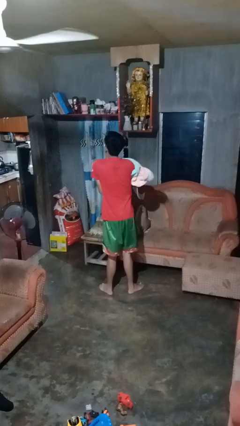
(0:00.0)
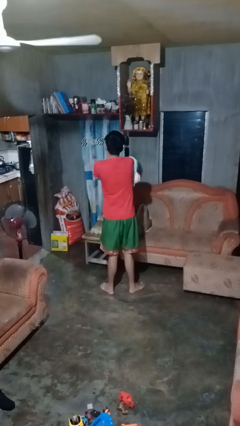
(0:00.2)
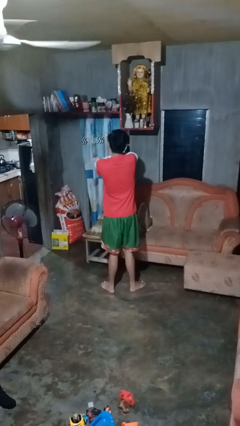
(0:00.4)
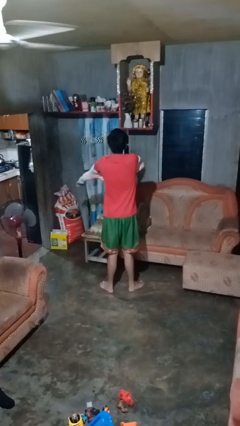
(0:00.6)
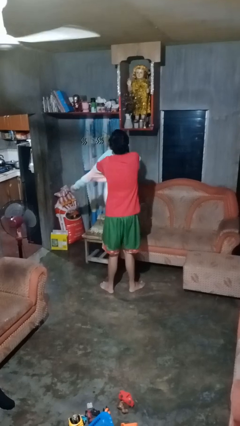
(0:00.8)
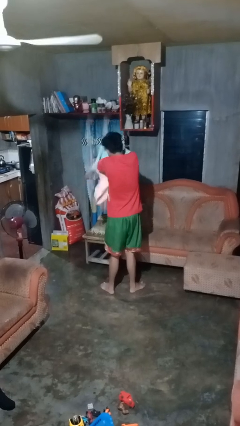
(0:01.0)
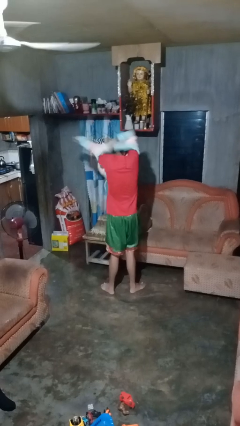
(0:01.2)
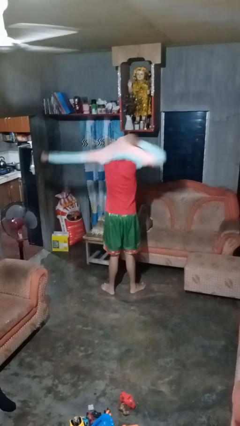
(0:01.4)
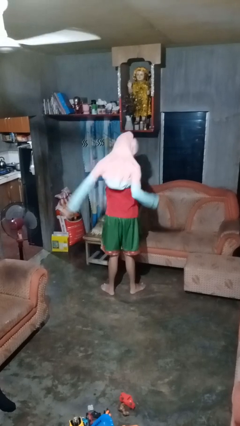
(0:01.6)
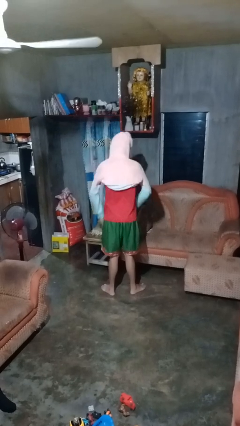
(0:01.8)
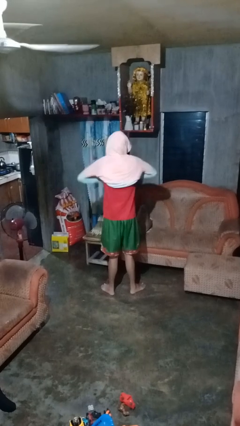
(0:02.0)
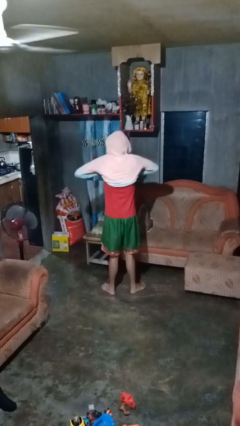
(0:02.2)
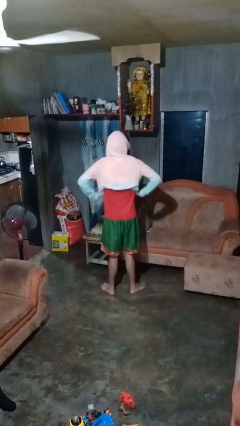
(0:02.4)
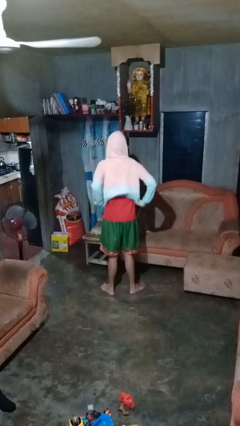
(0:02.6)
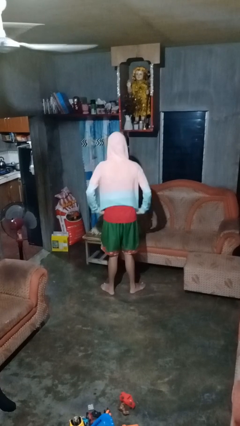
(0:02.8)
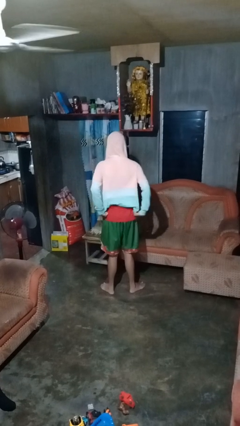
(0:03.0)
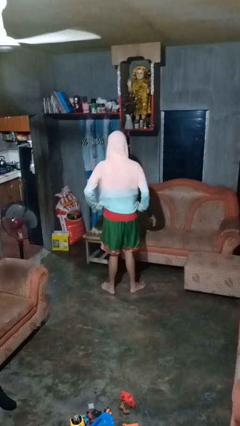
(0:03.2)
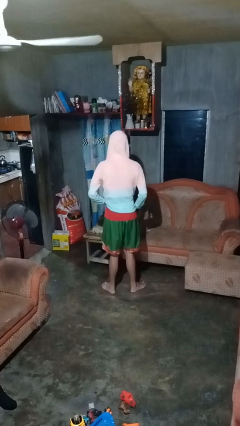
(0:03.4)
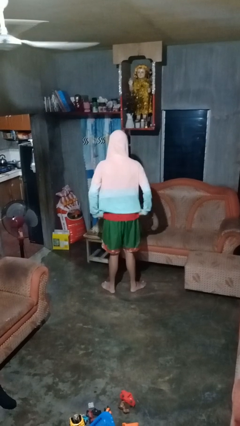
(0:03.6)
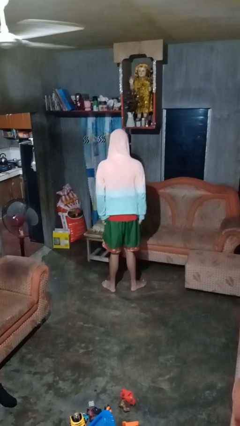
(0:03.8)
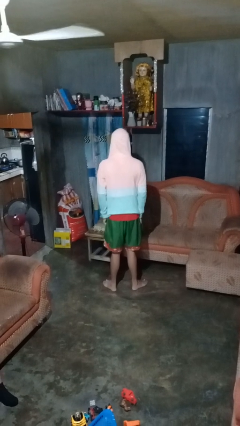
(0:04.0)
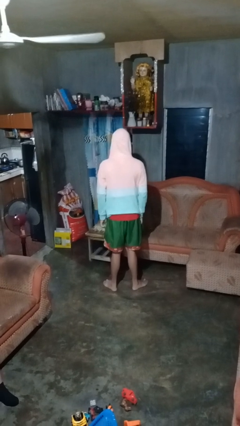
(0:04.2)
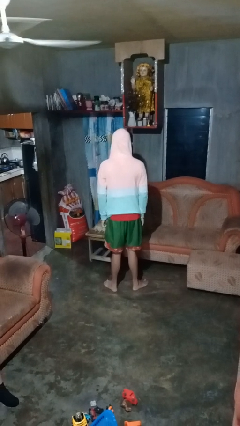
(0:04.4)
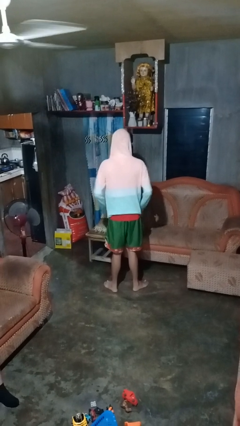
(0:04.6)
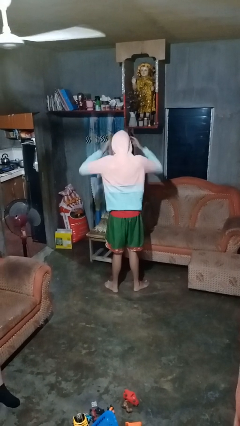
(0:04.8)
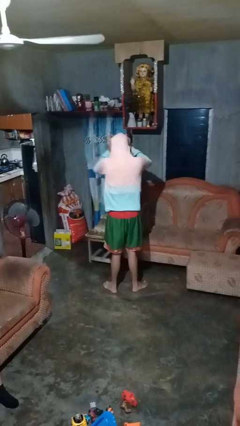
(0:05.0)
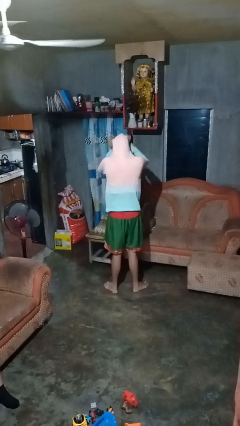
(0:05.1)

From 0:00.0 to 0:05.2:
person puts on hoodie

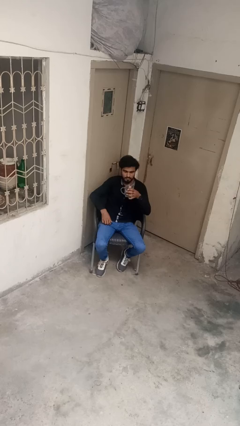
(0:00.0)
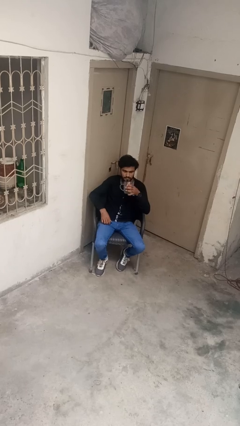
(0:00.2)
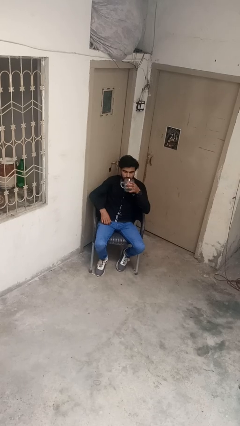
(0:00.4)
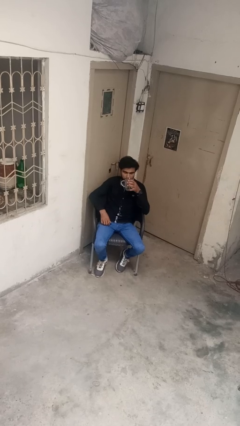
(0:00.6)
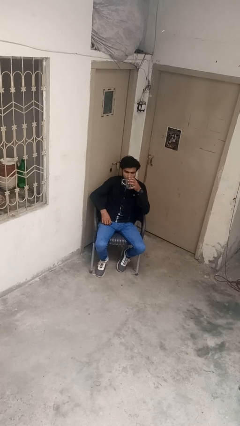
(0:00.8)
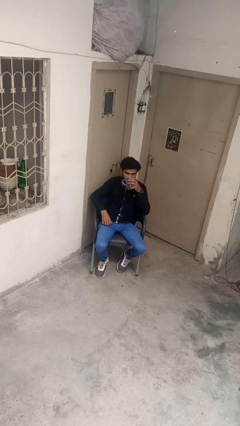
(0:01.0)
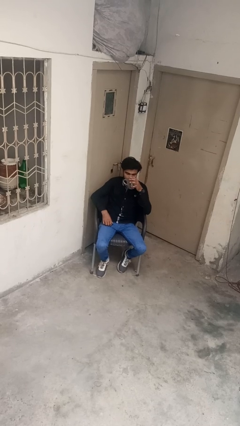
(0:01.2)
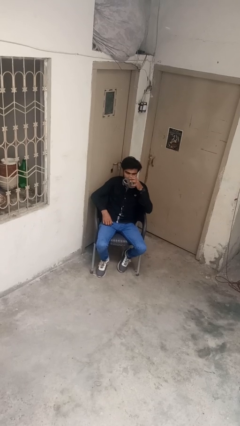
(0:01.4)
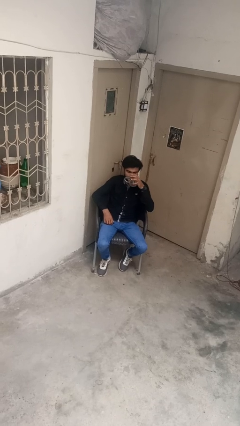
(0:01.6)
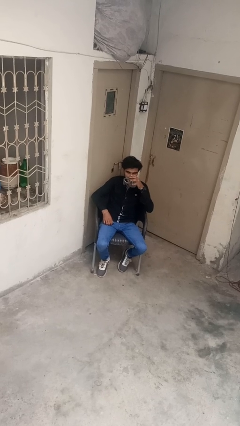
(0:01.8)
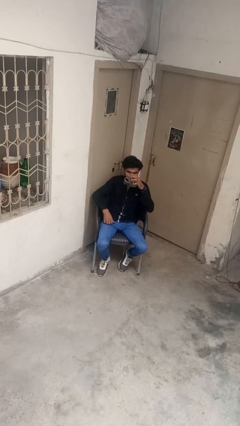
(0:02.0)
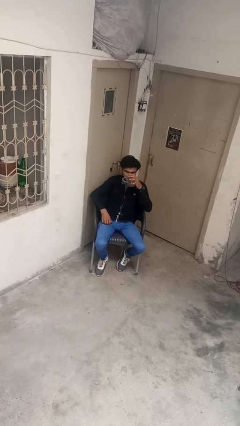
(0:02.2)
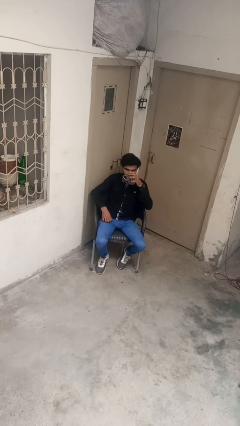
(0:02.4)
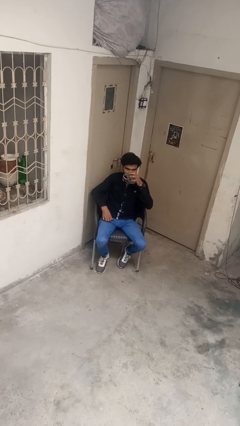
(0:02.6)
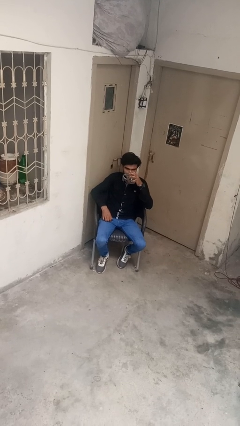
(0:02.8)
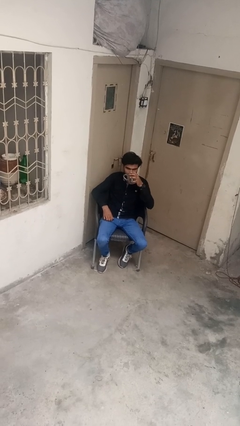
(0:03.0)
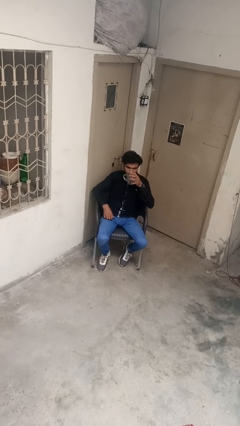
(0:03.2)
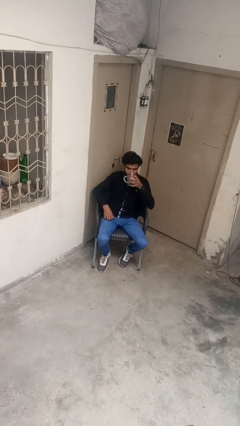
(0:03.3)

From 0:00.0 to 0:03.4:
person drinks from cup

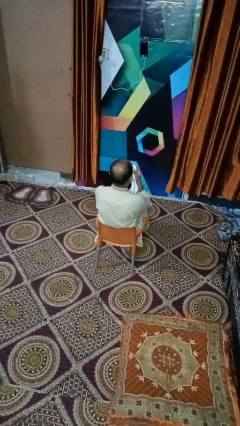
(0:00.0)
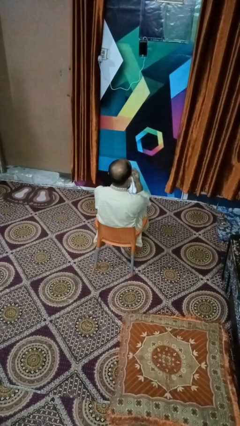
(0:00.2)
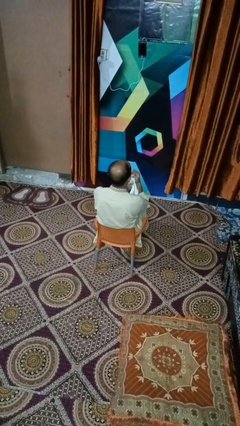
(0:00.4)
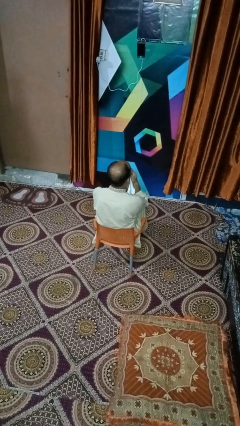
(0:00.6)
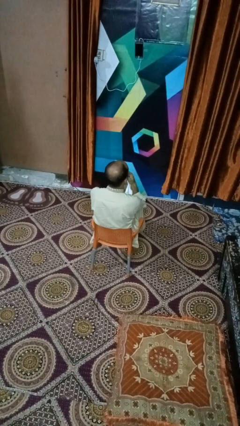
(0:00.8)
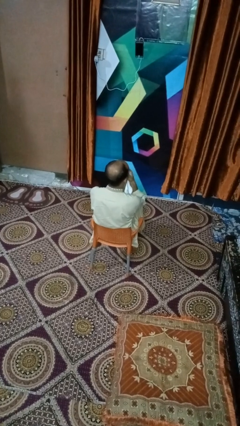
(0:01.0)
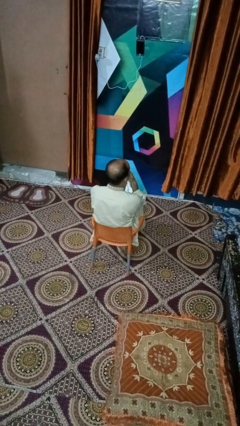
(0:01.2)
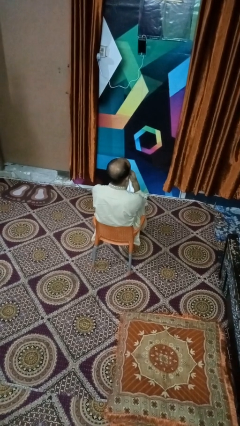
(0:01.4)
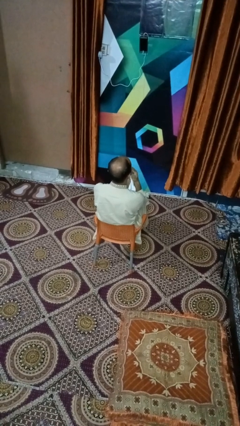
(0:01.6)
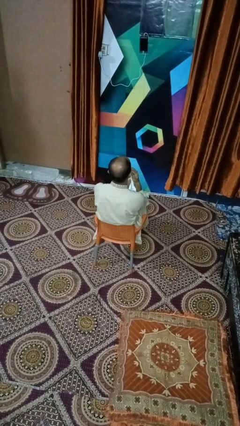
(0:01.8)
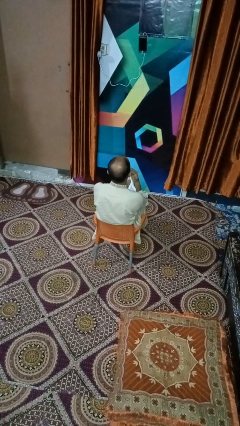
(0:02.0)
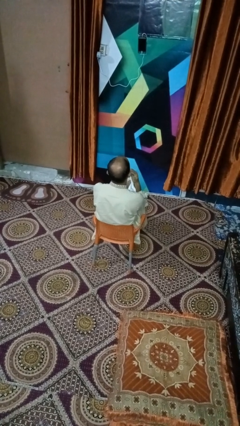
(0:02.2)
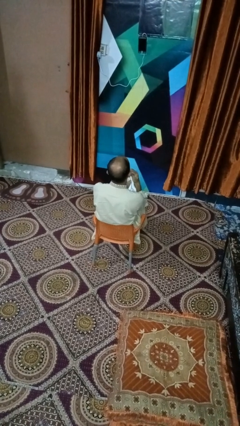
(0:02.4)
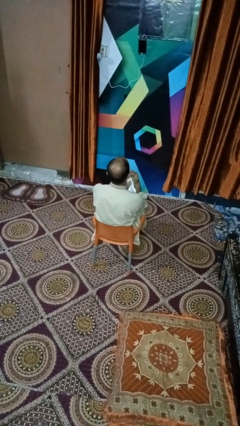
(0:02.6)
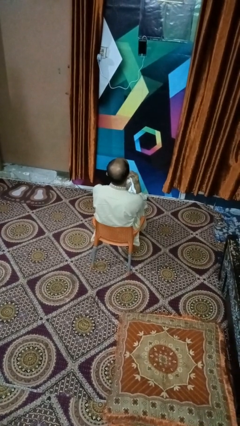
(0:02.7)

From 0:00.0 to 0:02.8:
person wipes mouth with napkin

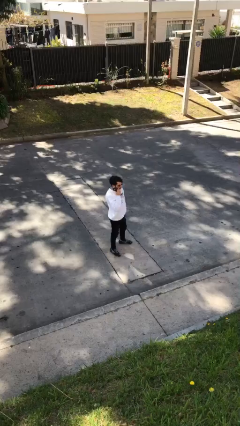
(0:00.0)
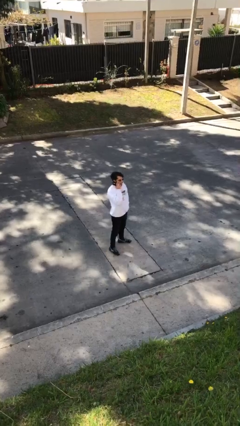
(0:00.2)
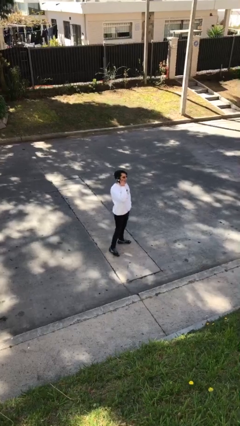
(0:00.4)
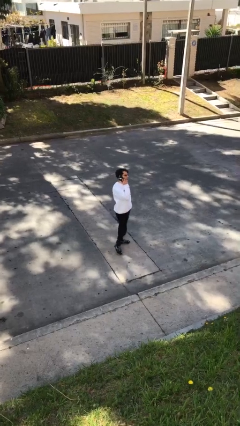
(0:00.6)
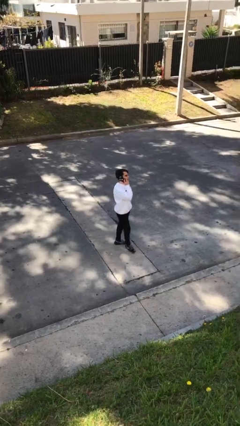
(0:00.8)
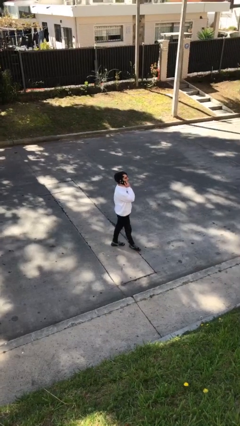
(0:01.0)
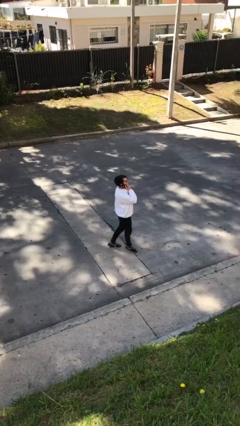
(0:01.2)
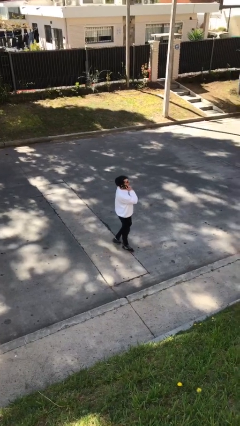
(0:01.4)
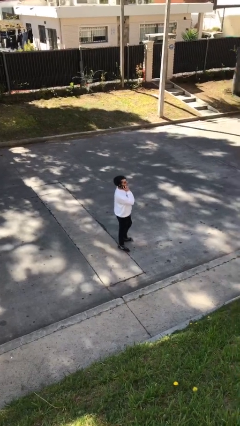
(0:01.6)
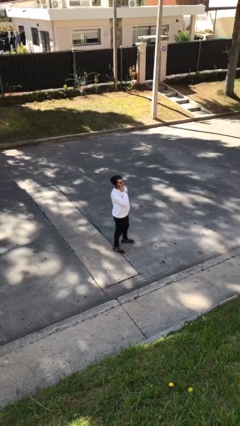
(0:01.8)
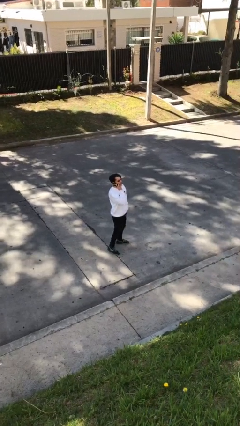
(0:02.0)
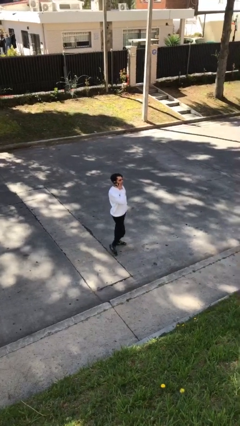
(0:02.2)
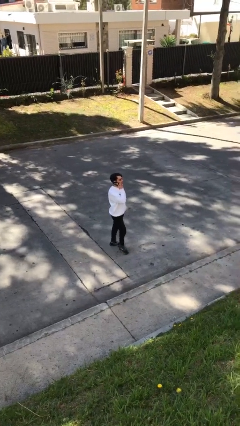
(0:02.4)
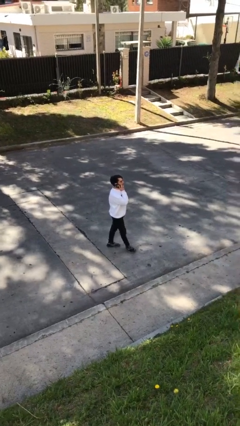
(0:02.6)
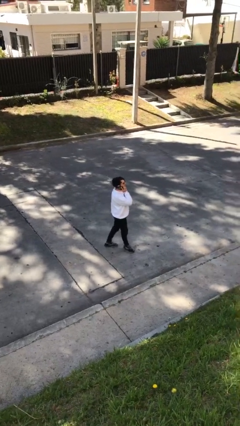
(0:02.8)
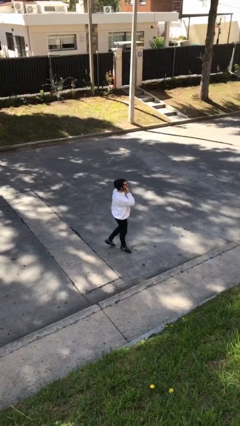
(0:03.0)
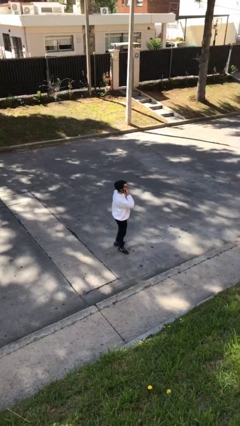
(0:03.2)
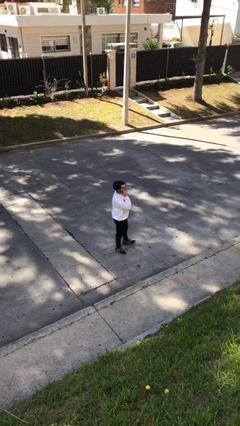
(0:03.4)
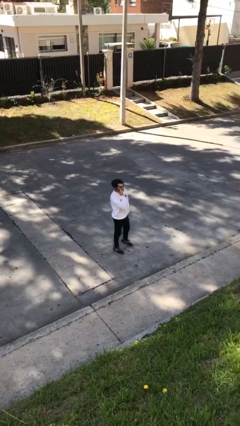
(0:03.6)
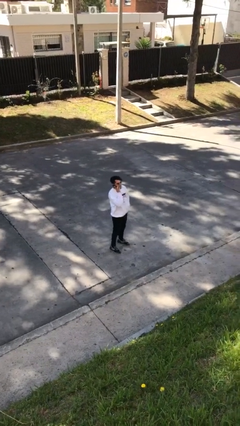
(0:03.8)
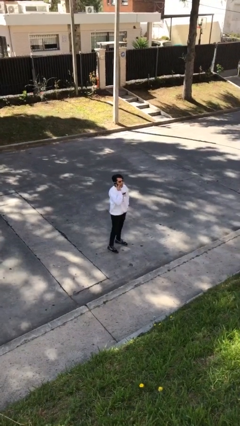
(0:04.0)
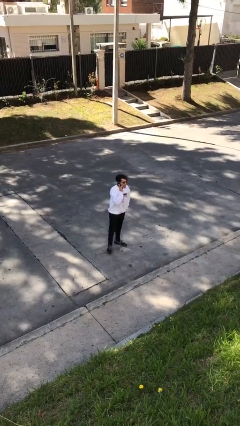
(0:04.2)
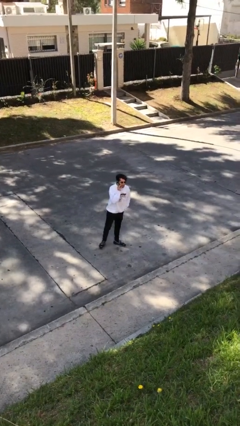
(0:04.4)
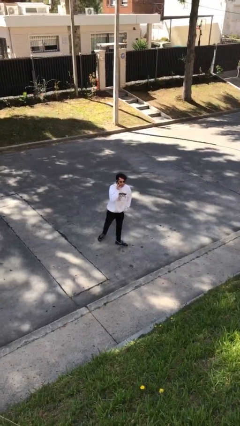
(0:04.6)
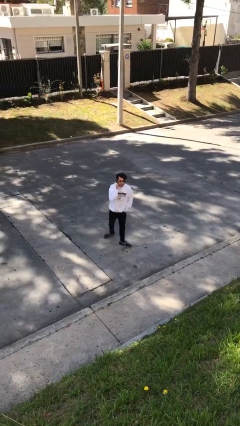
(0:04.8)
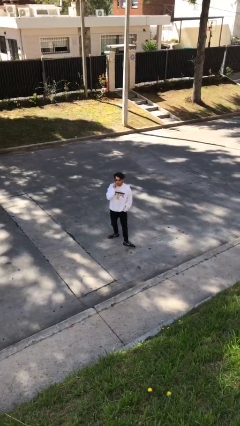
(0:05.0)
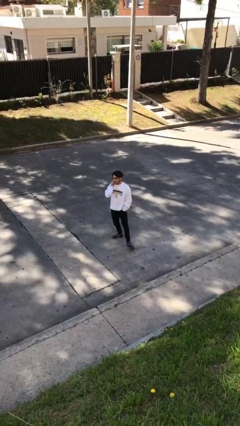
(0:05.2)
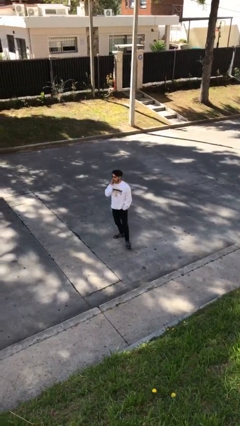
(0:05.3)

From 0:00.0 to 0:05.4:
person talks on phone

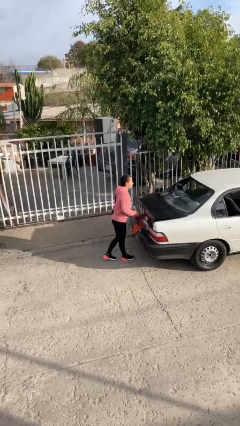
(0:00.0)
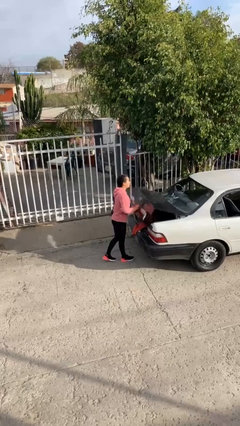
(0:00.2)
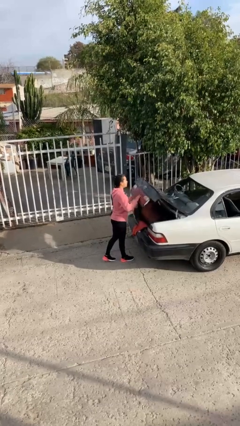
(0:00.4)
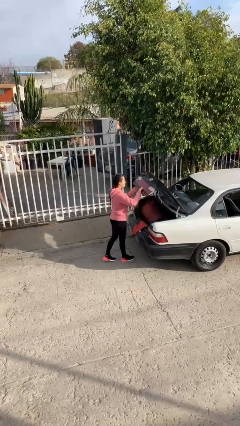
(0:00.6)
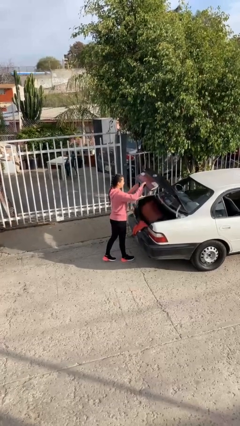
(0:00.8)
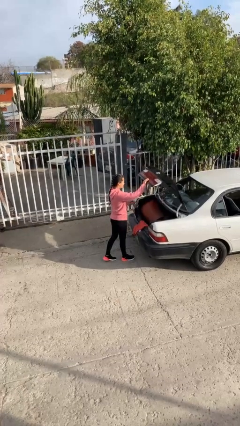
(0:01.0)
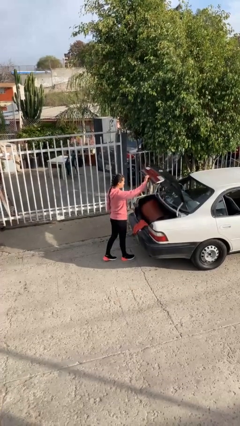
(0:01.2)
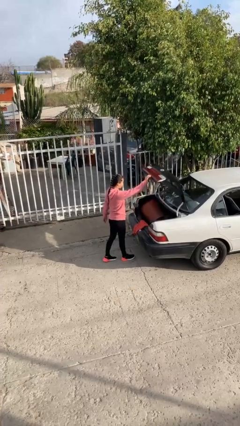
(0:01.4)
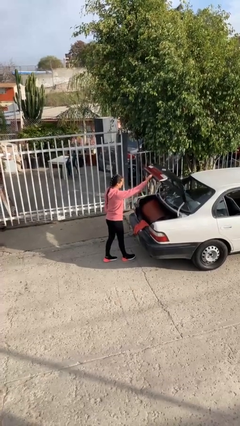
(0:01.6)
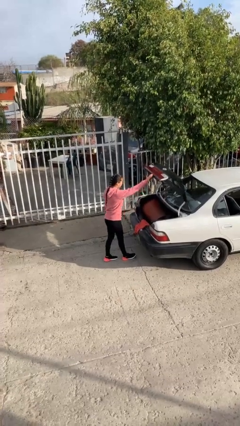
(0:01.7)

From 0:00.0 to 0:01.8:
person opens car trunk
